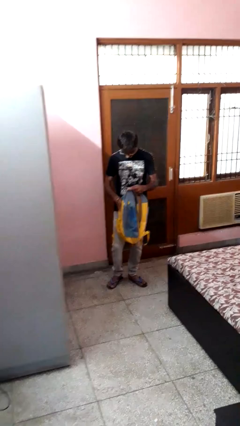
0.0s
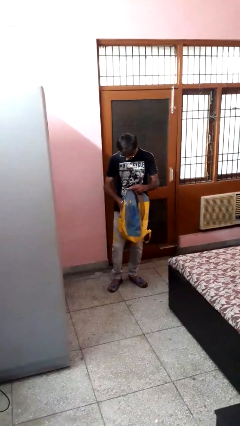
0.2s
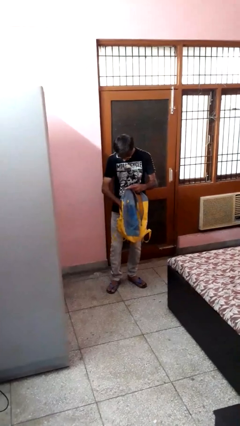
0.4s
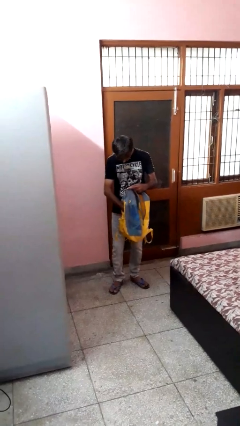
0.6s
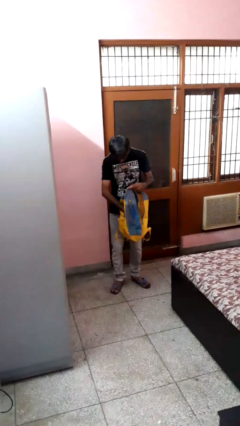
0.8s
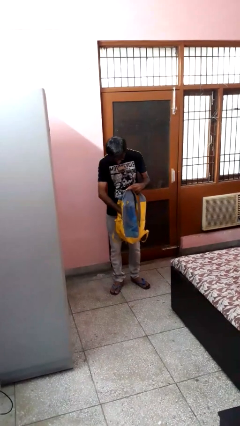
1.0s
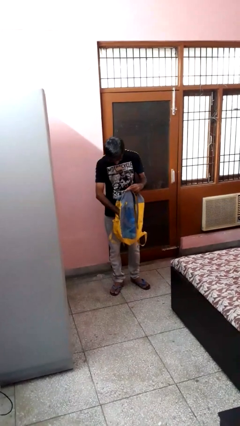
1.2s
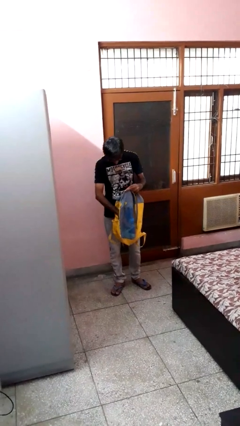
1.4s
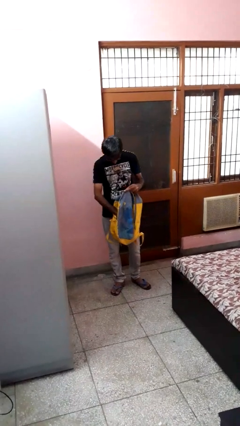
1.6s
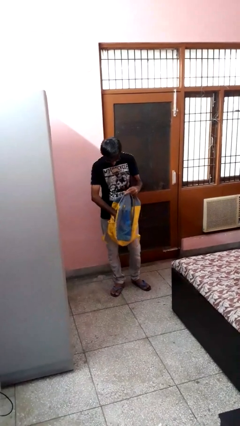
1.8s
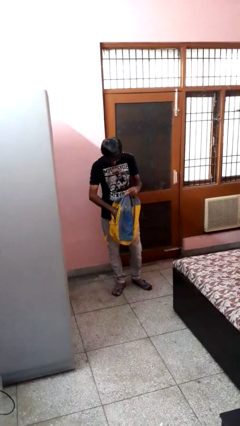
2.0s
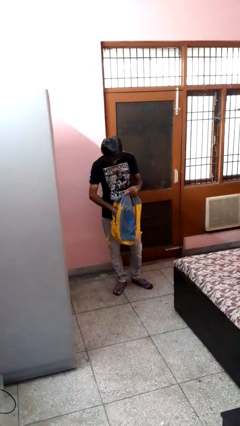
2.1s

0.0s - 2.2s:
person searches in backpack

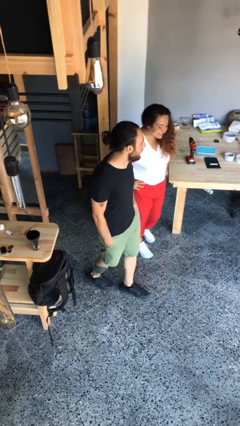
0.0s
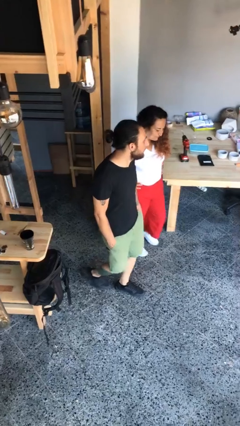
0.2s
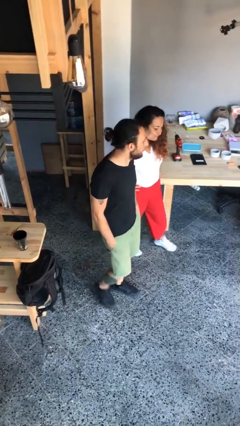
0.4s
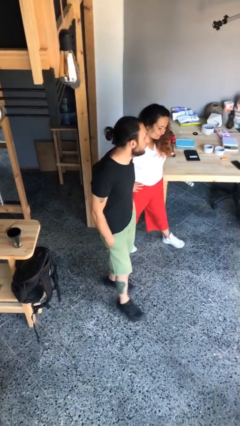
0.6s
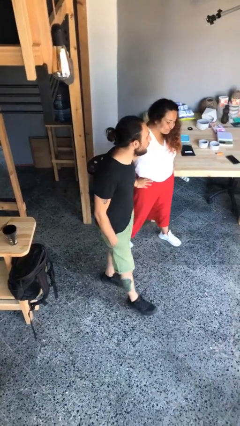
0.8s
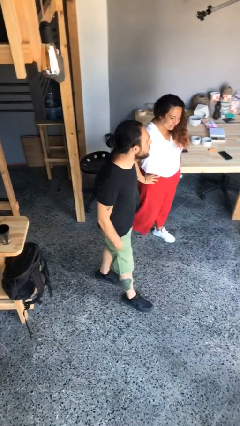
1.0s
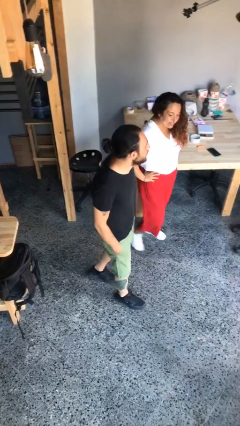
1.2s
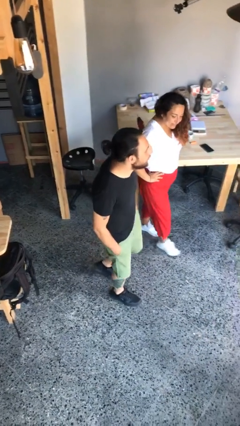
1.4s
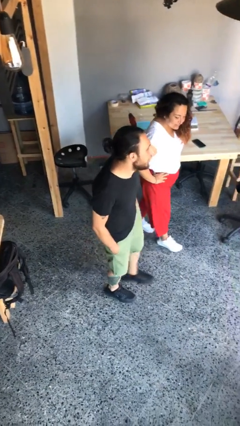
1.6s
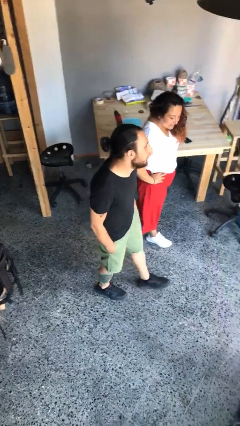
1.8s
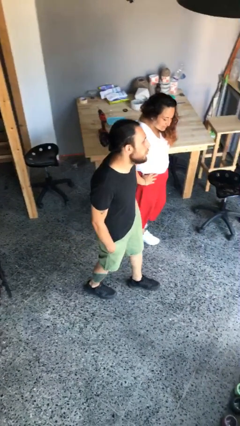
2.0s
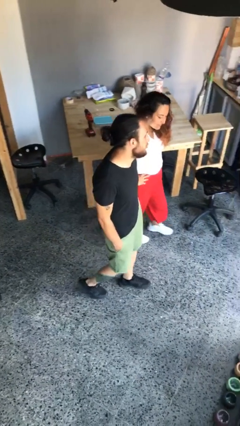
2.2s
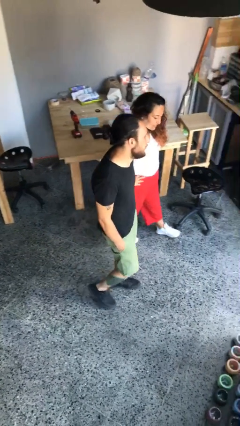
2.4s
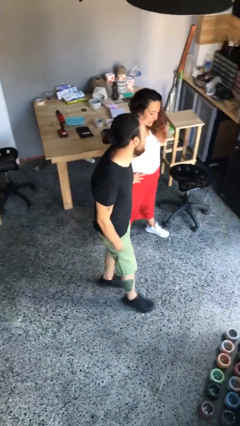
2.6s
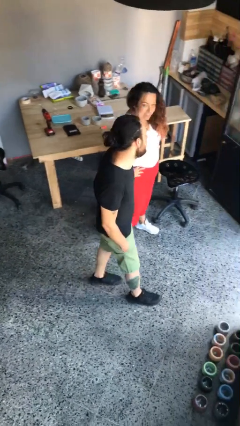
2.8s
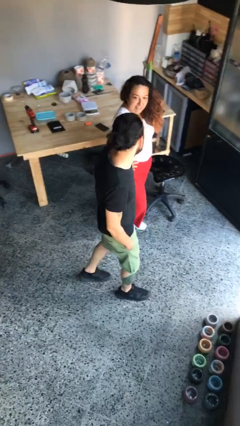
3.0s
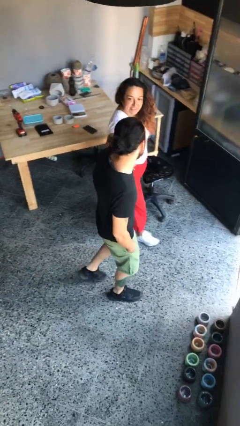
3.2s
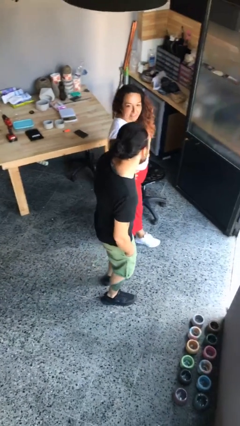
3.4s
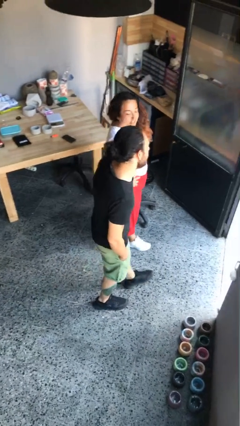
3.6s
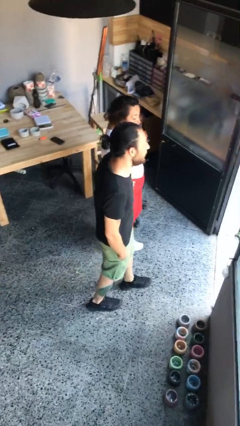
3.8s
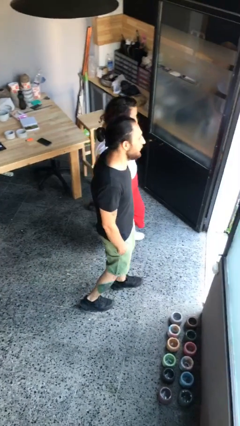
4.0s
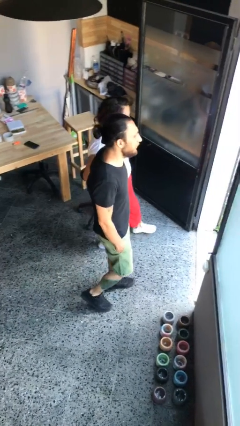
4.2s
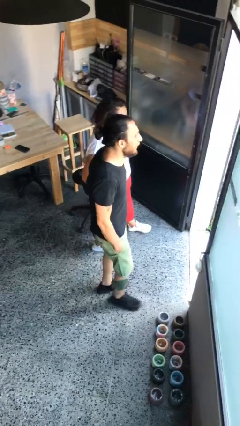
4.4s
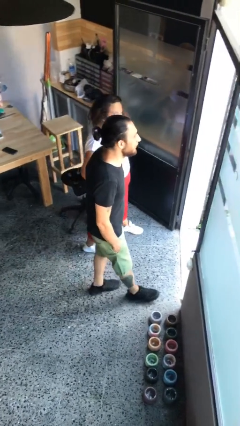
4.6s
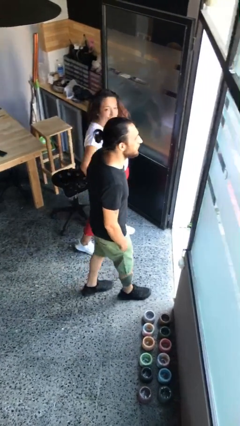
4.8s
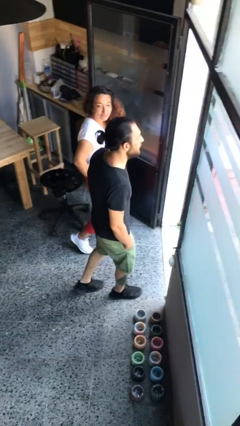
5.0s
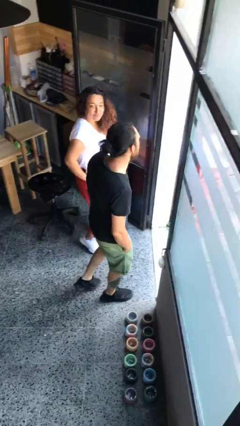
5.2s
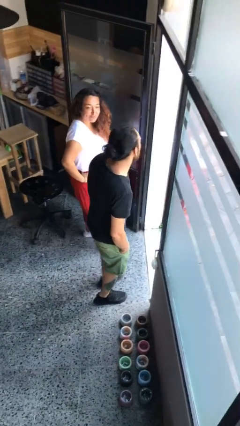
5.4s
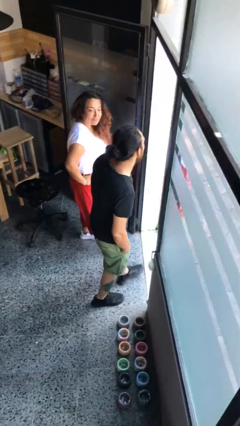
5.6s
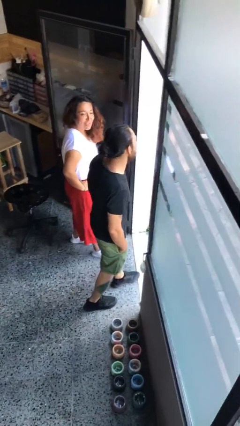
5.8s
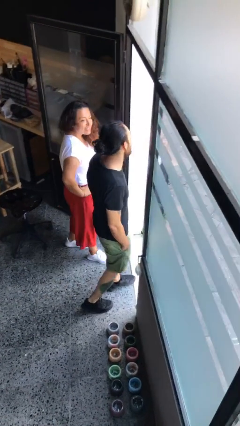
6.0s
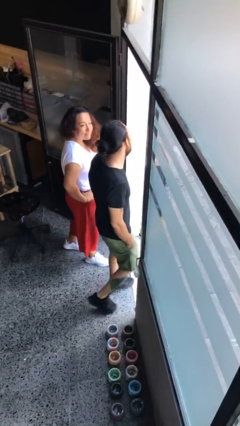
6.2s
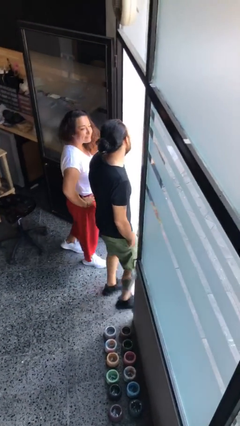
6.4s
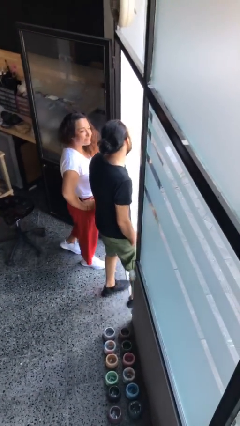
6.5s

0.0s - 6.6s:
person talks to person

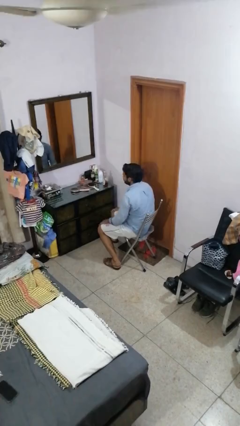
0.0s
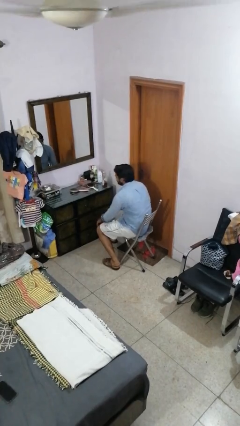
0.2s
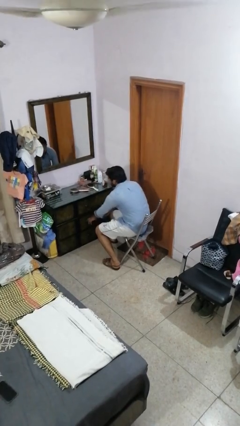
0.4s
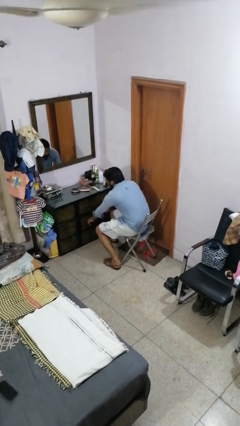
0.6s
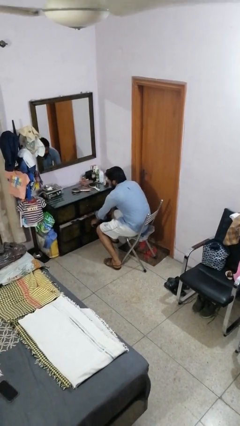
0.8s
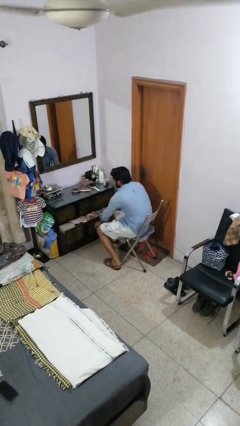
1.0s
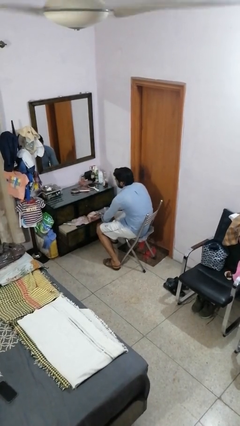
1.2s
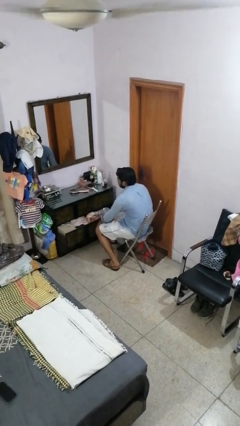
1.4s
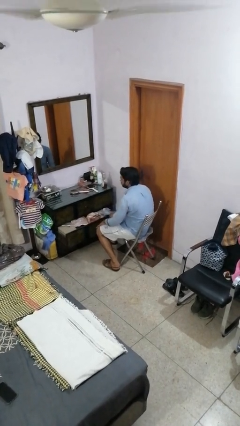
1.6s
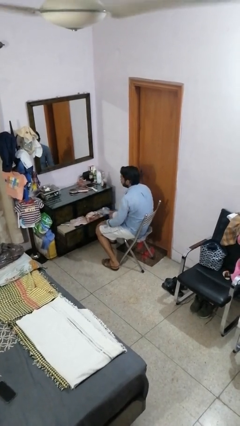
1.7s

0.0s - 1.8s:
person opens dresser drawer

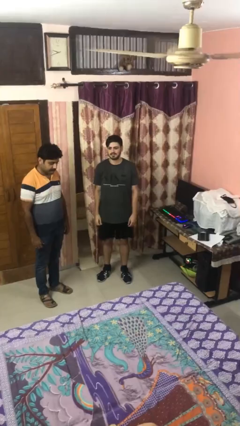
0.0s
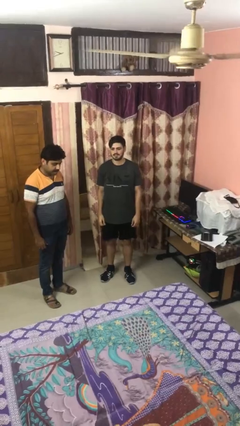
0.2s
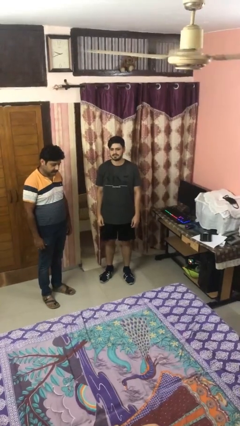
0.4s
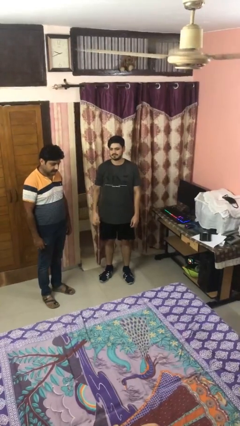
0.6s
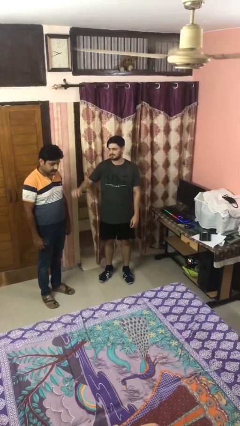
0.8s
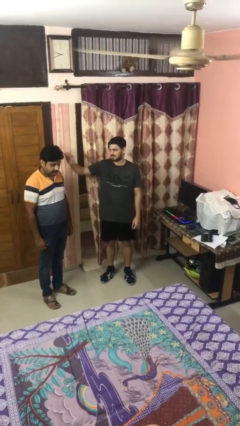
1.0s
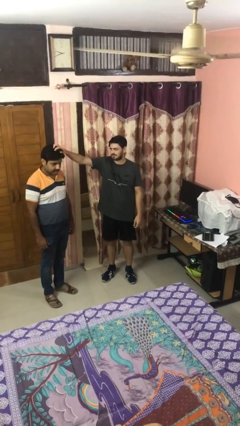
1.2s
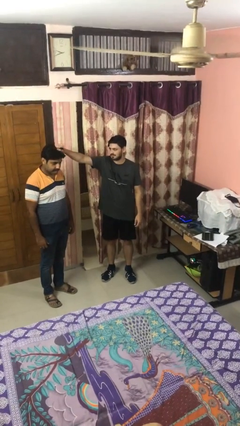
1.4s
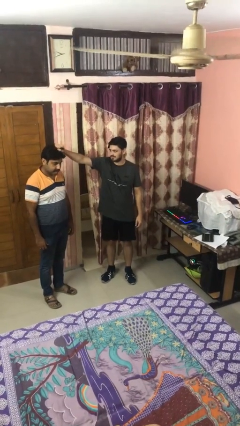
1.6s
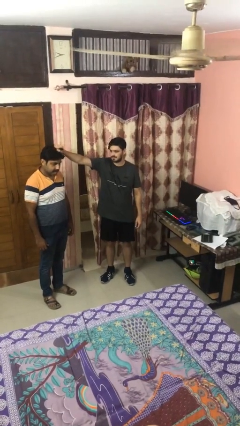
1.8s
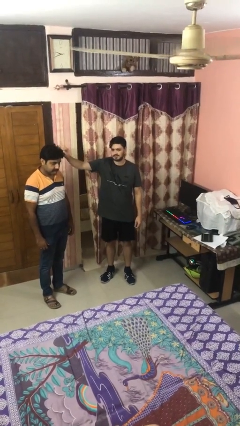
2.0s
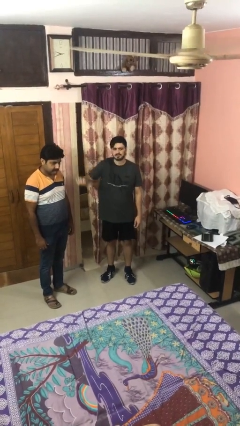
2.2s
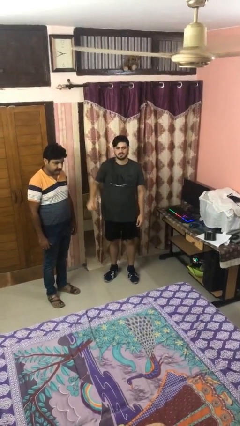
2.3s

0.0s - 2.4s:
person grabs person by hair

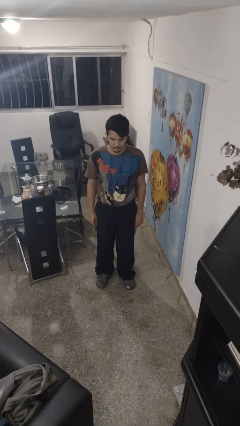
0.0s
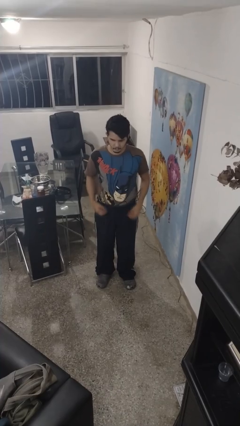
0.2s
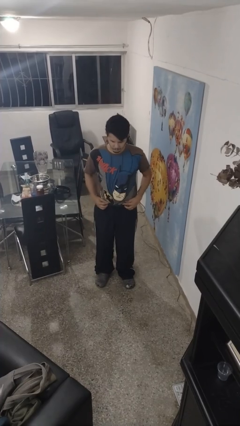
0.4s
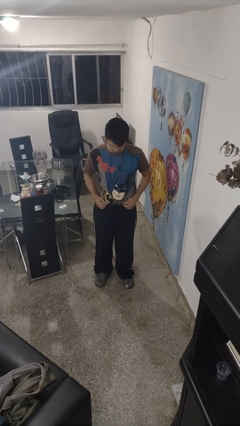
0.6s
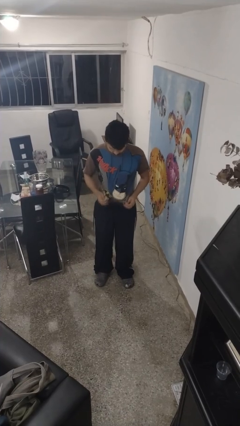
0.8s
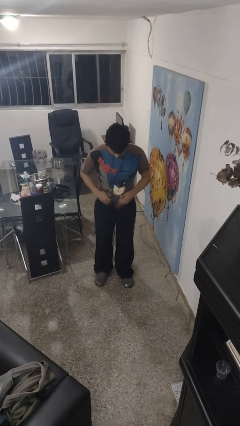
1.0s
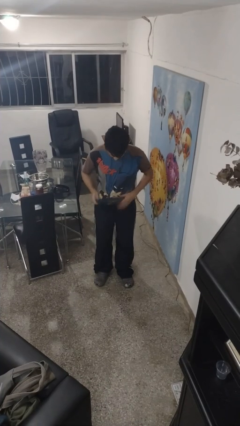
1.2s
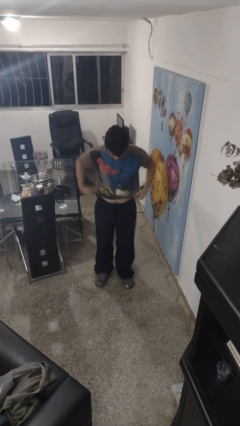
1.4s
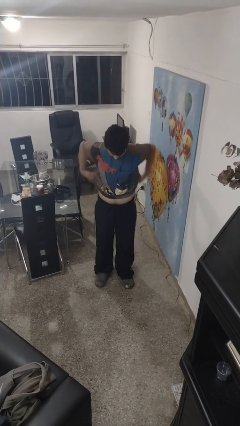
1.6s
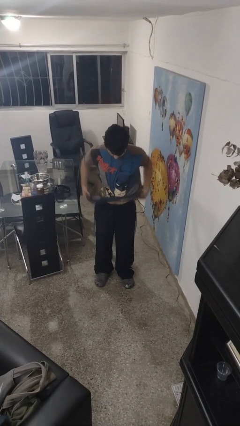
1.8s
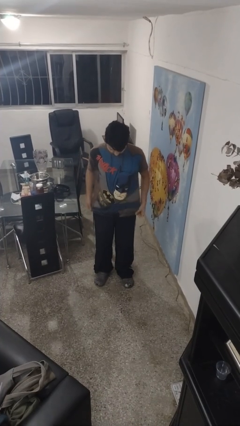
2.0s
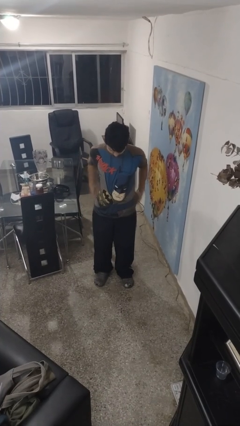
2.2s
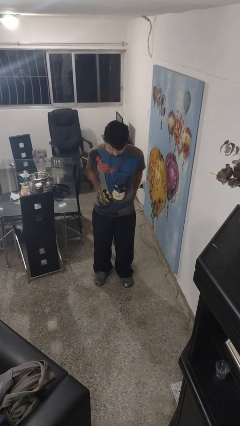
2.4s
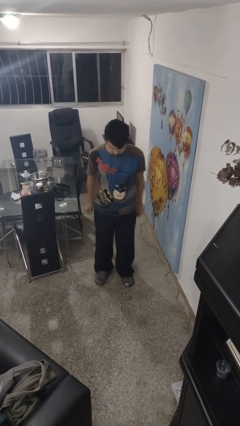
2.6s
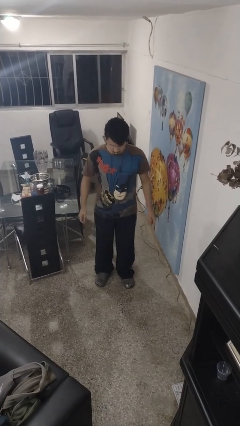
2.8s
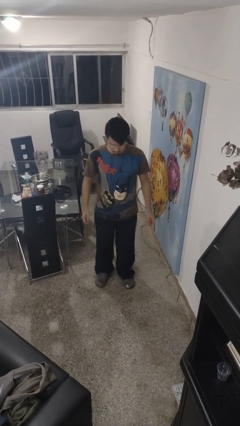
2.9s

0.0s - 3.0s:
person untucks shirt

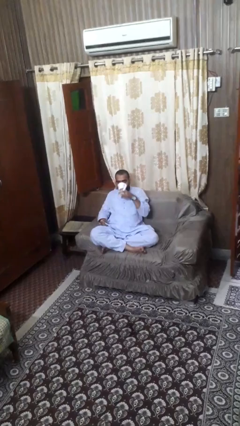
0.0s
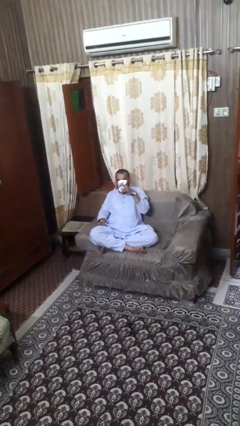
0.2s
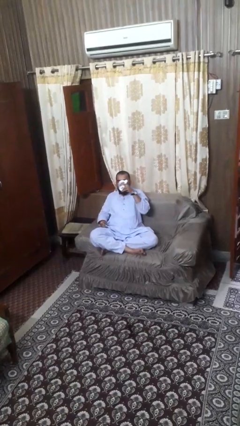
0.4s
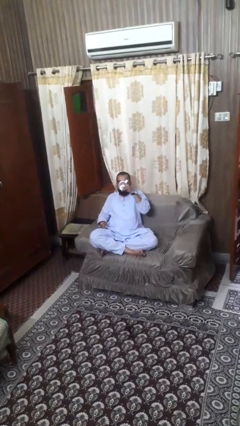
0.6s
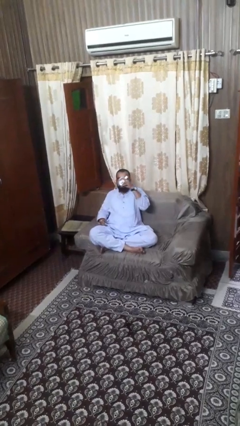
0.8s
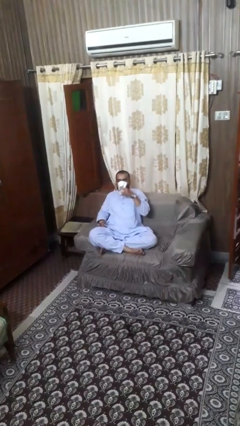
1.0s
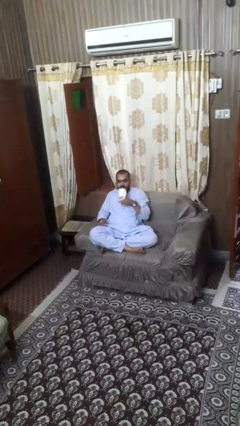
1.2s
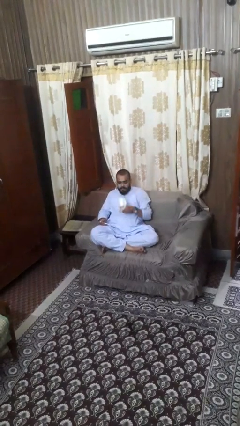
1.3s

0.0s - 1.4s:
person drinks from mug
